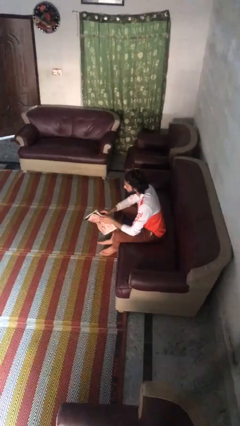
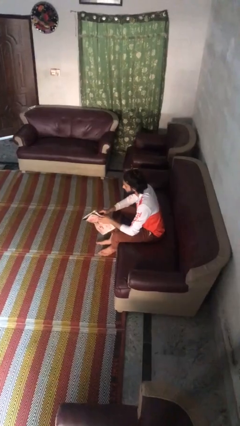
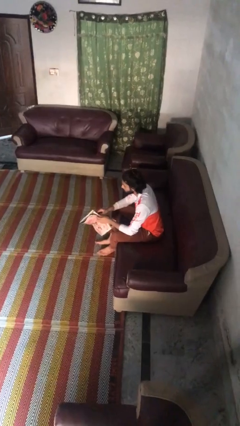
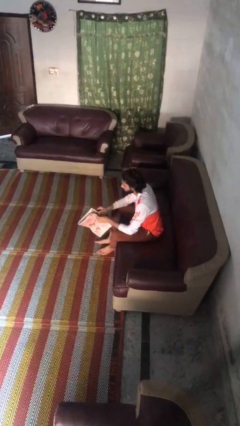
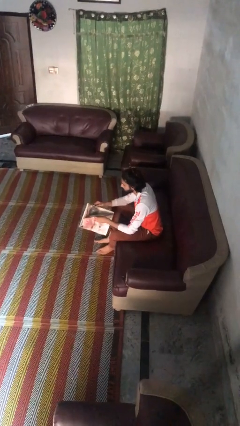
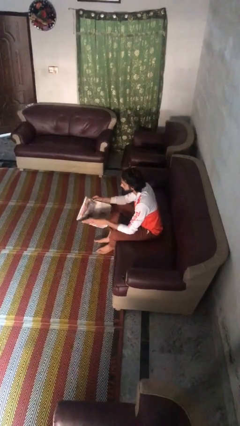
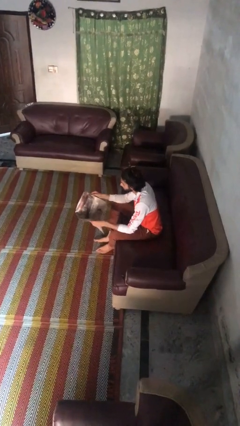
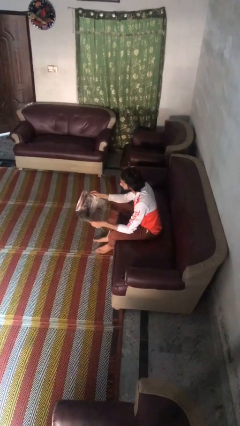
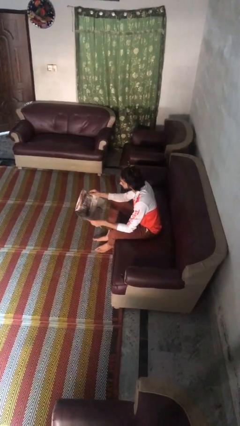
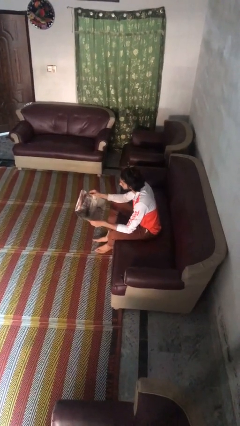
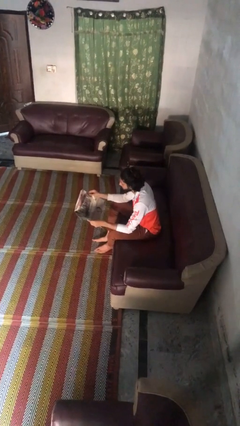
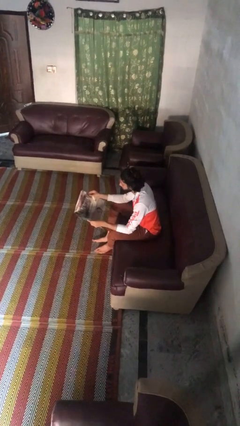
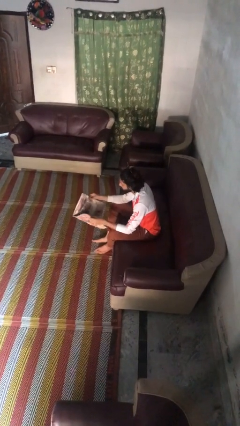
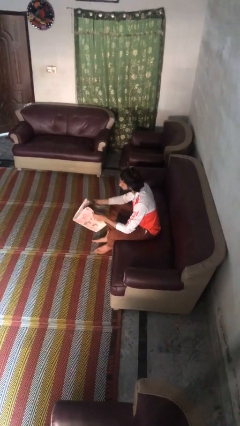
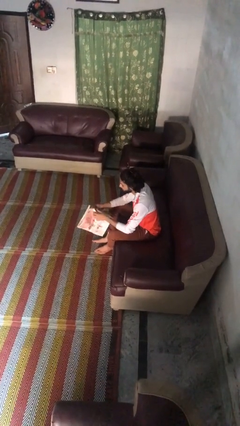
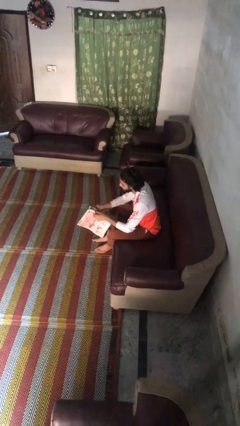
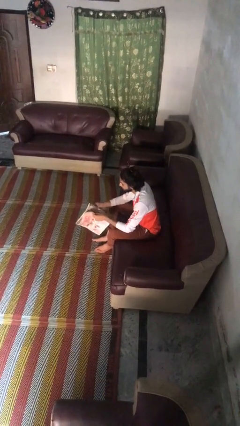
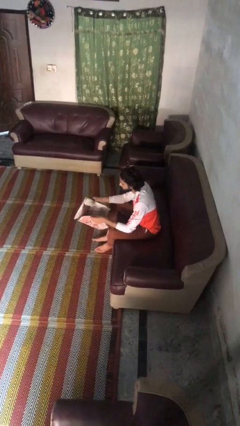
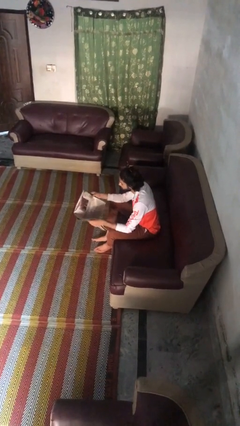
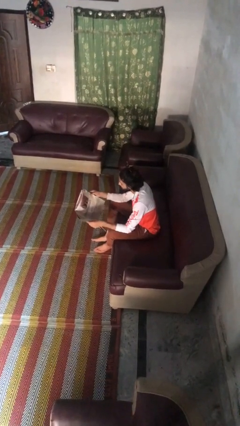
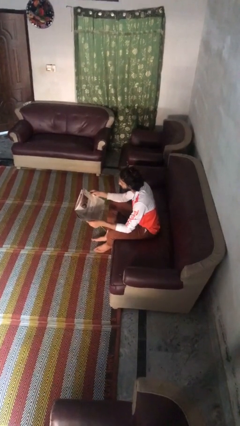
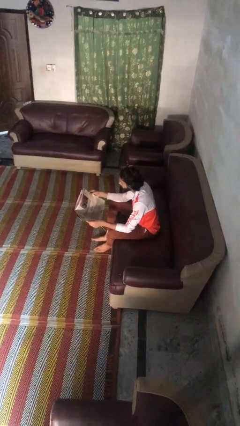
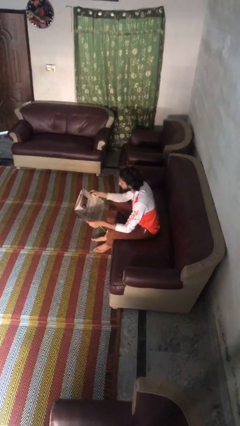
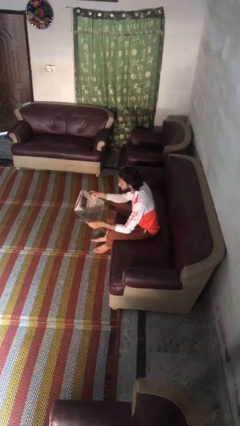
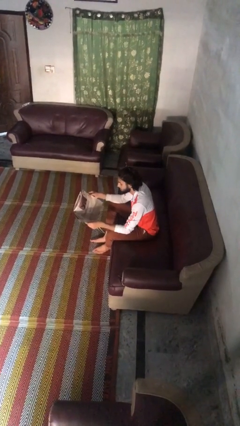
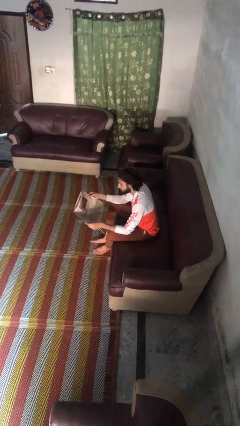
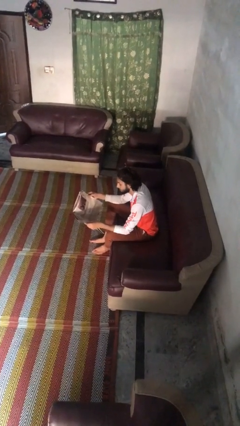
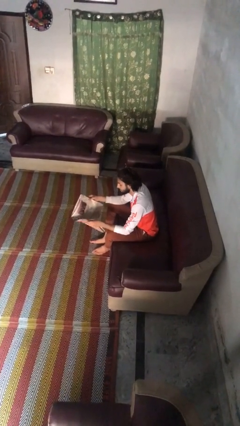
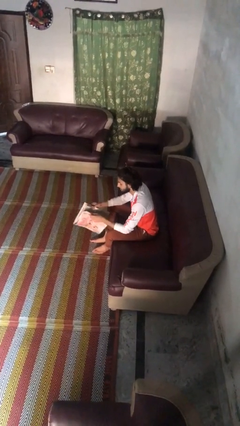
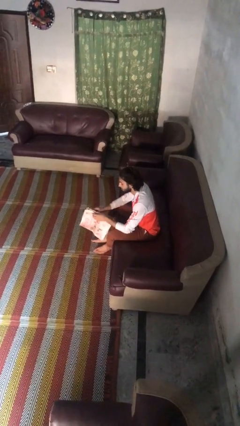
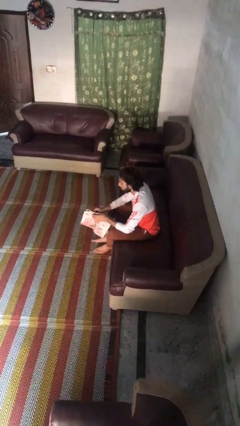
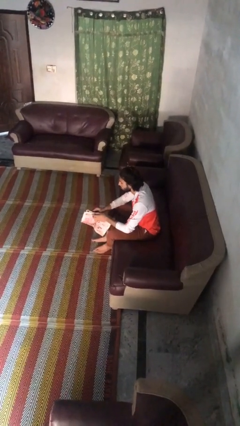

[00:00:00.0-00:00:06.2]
person reads magazine

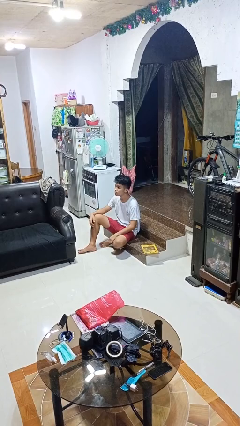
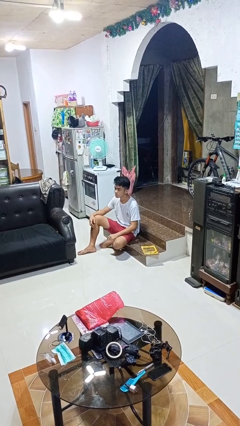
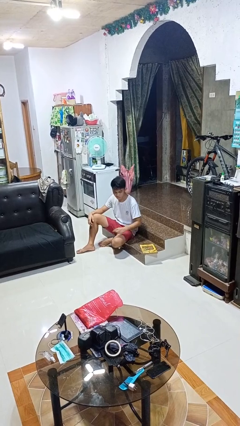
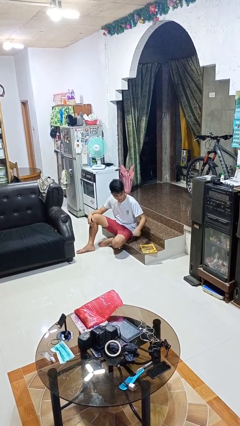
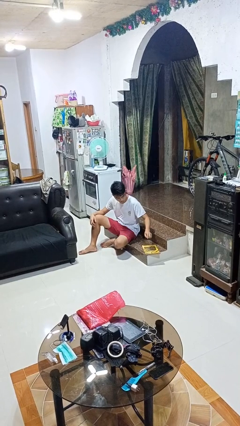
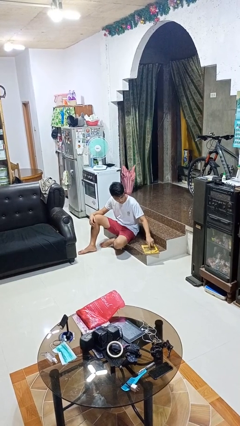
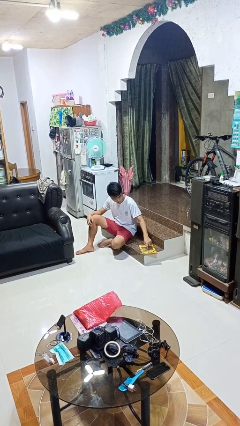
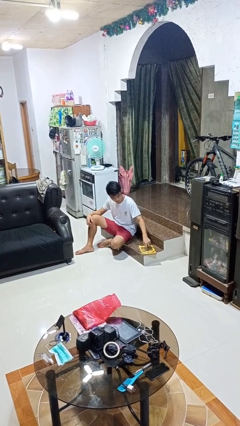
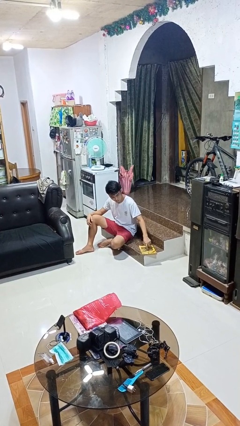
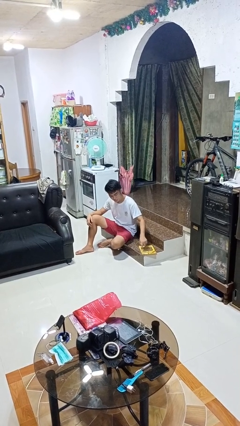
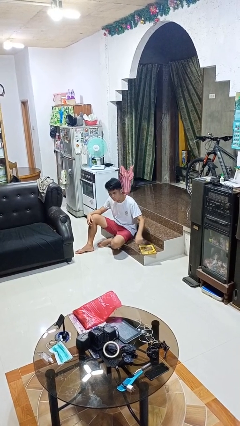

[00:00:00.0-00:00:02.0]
person taps object with finger

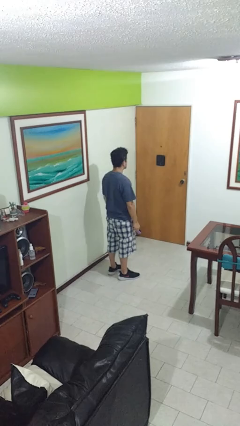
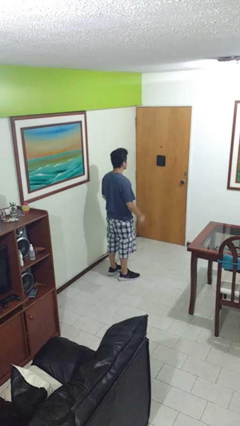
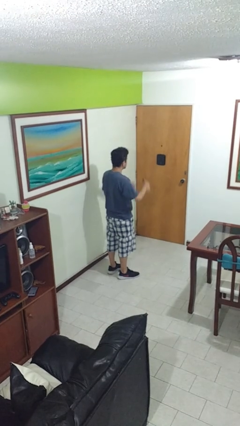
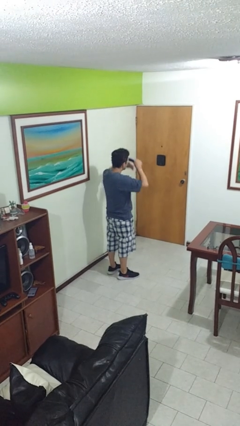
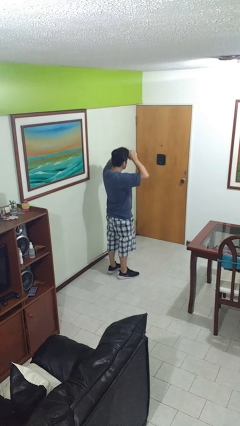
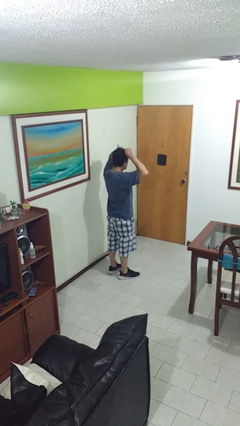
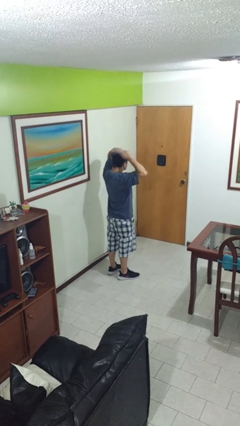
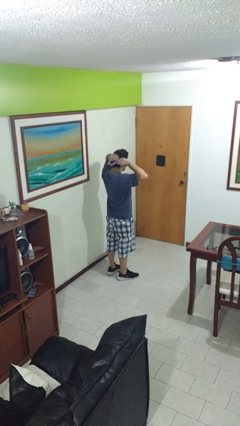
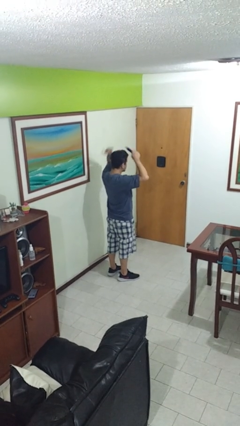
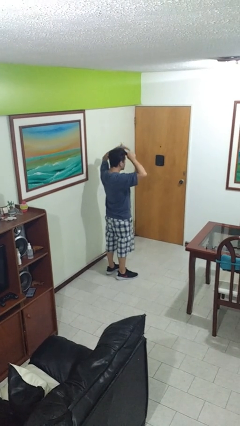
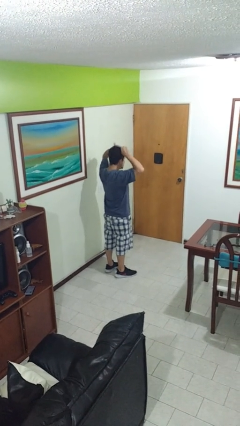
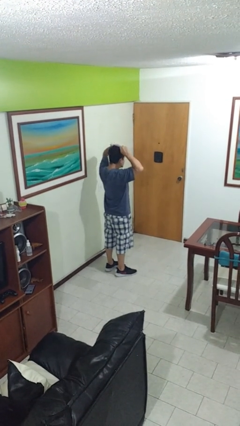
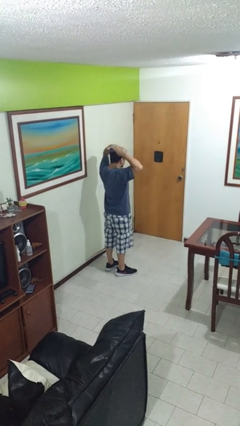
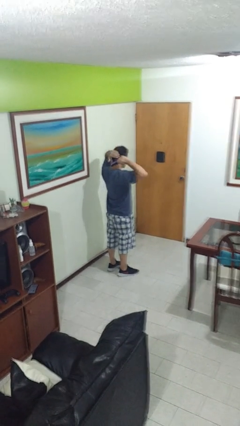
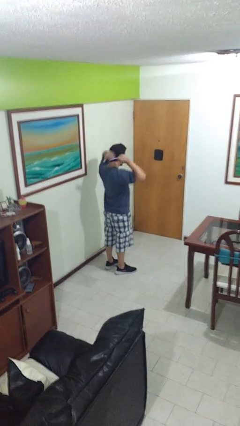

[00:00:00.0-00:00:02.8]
person brushes hair

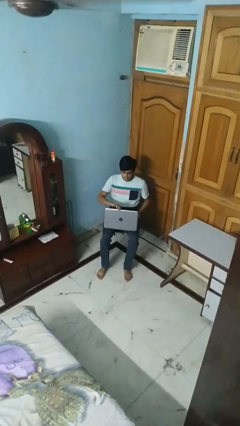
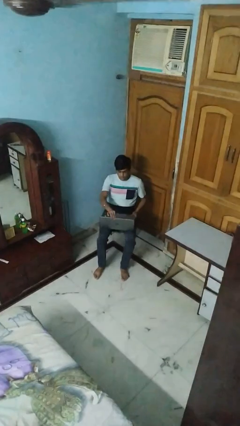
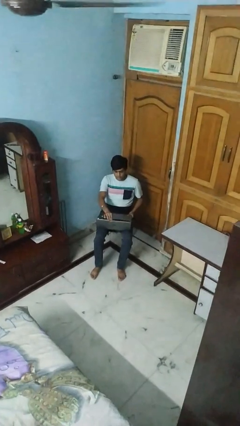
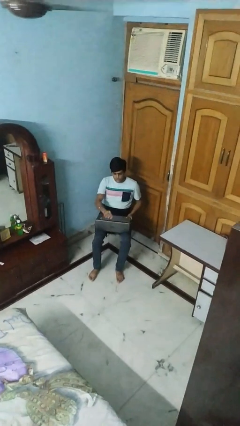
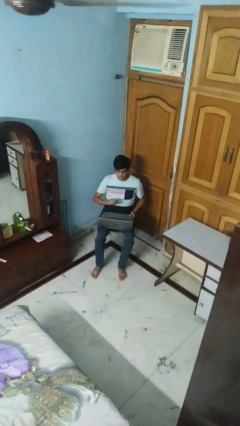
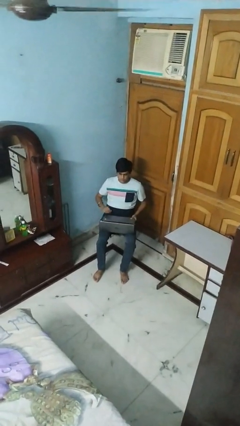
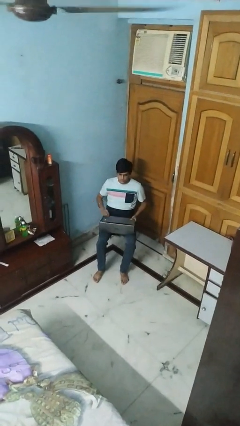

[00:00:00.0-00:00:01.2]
person opens laptop

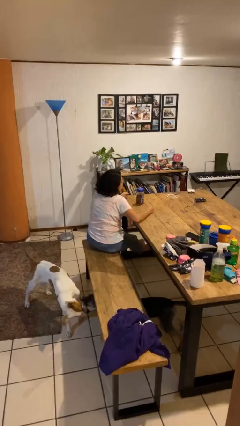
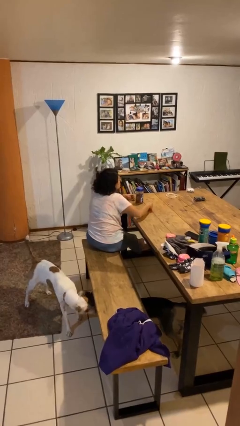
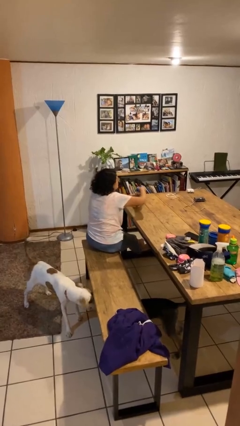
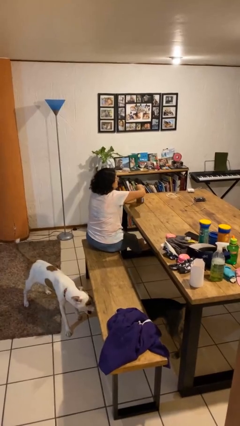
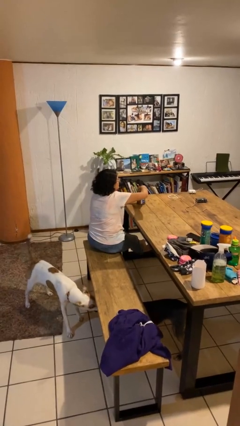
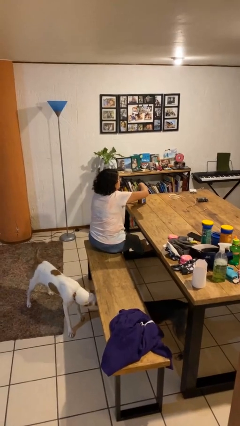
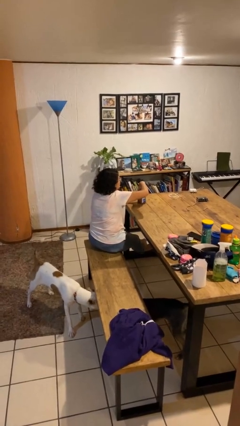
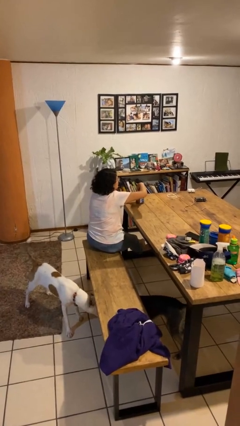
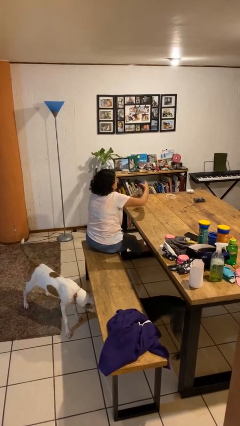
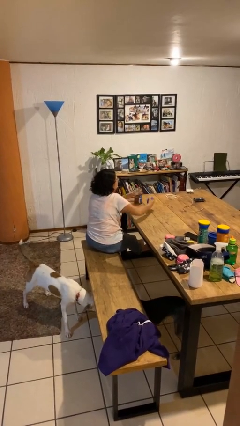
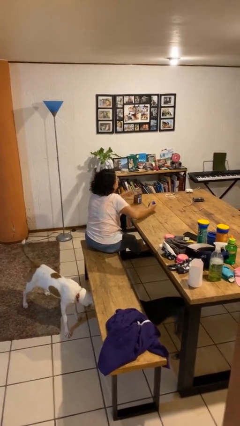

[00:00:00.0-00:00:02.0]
person opens jar

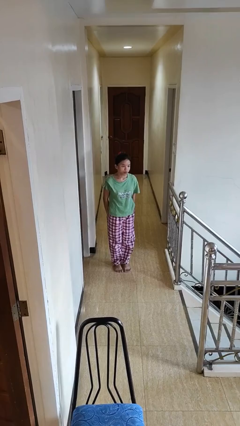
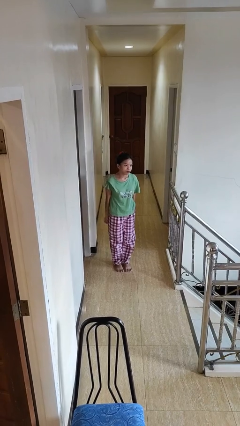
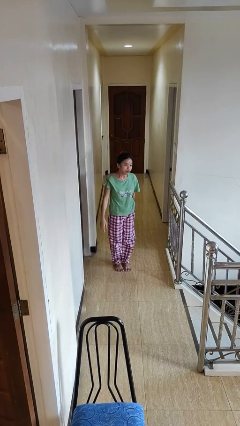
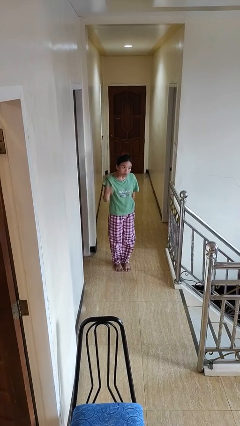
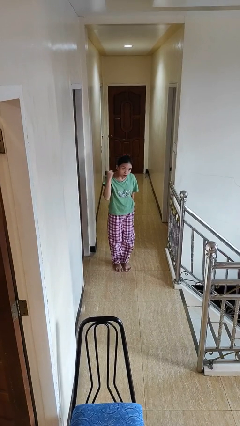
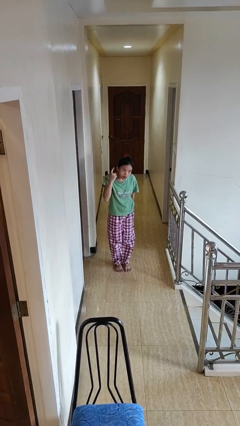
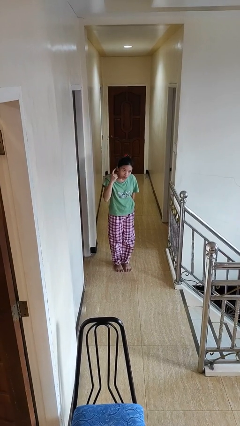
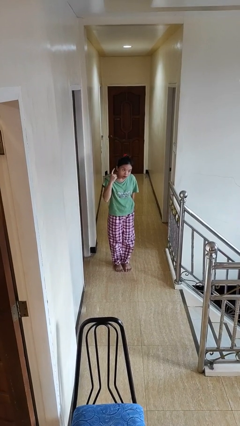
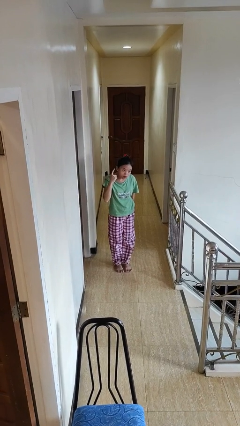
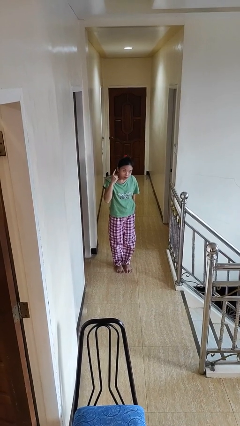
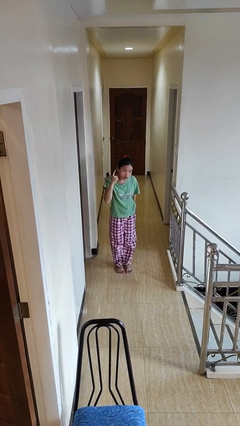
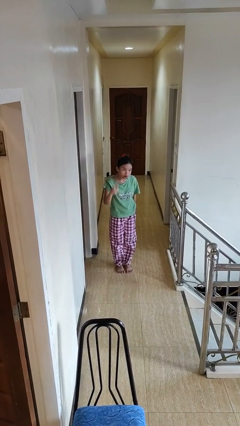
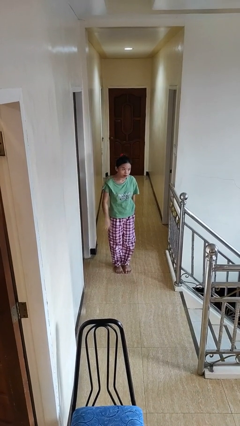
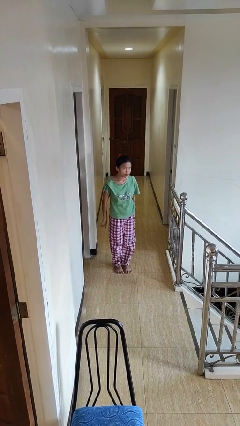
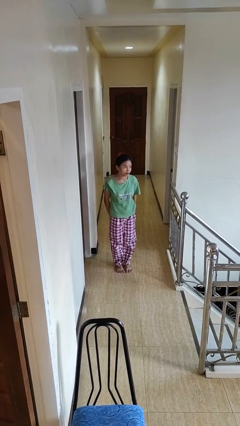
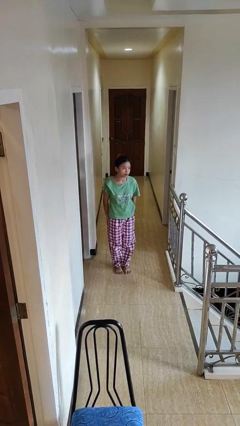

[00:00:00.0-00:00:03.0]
person gestures listen closely
